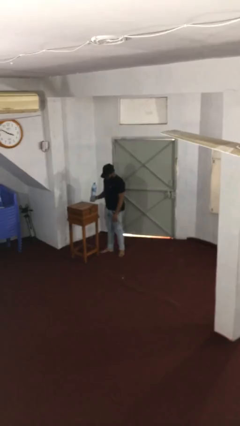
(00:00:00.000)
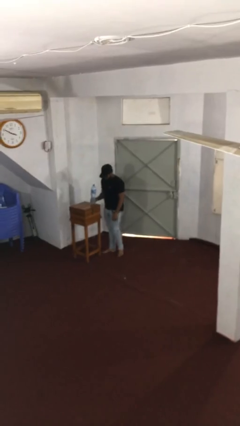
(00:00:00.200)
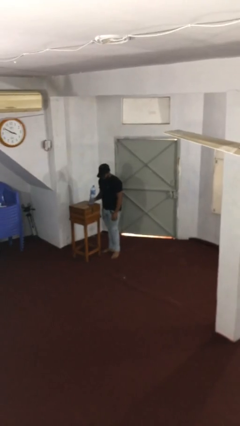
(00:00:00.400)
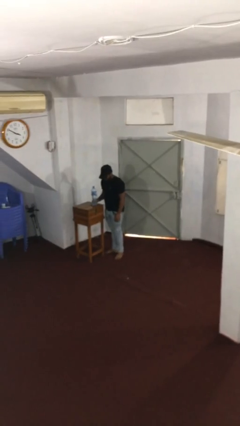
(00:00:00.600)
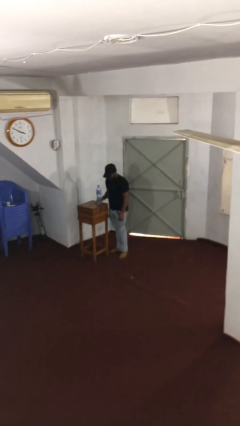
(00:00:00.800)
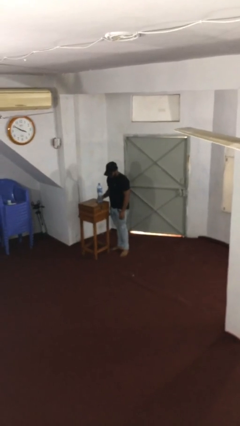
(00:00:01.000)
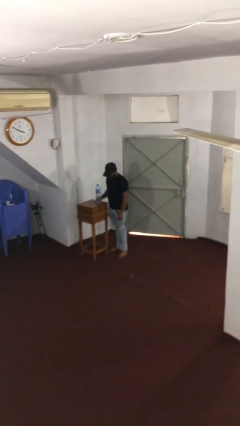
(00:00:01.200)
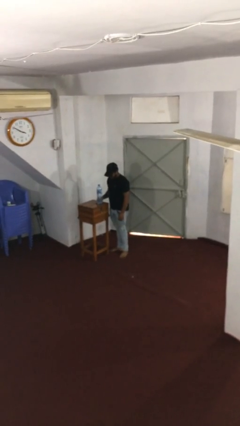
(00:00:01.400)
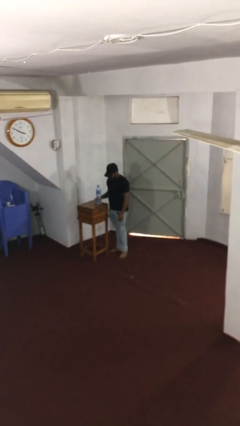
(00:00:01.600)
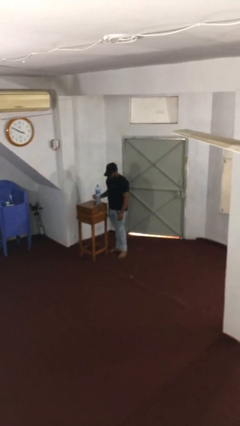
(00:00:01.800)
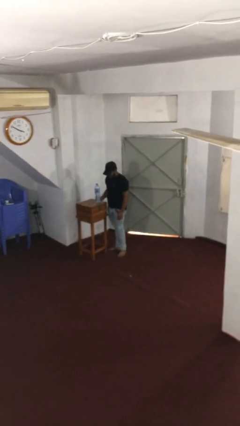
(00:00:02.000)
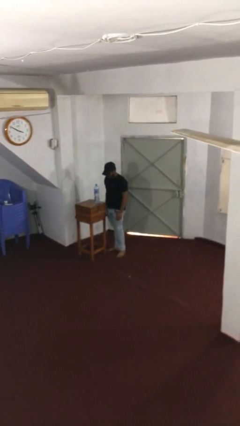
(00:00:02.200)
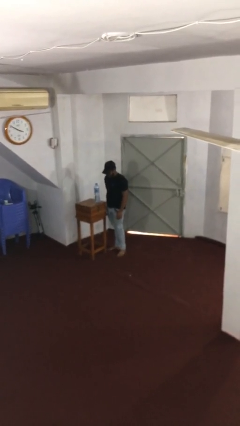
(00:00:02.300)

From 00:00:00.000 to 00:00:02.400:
person puts down object on table

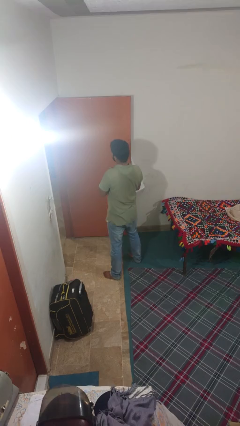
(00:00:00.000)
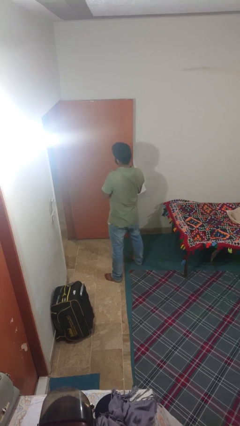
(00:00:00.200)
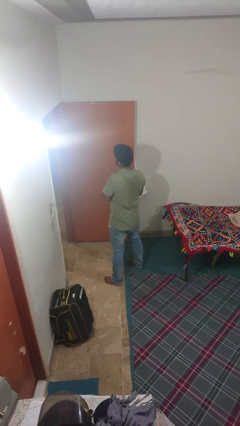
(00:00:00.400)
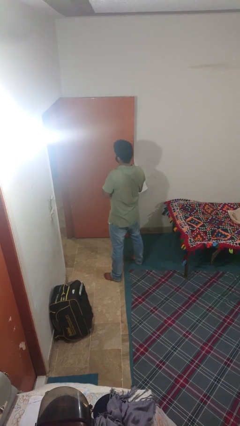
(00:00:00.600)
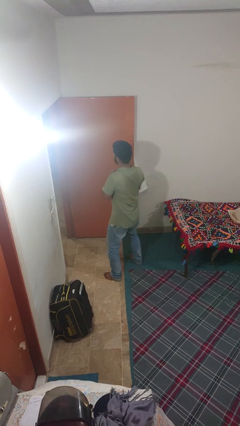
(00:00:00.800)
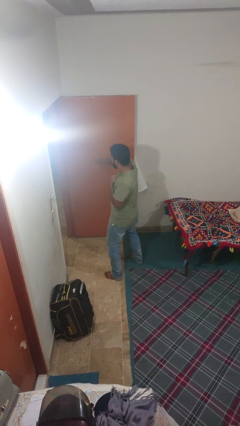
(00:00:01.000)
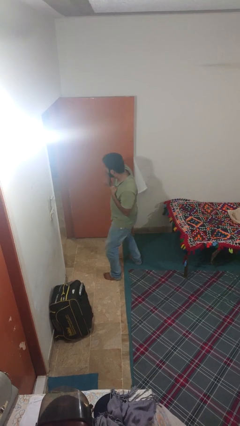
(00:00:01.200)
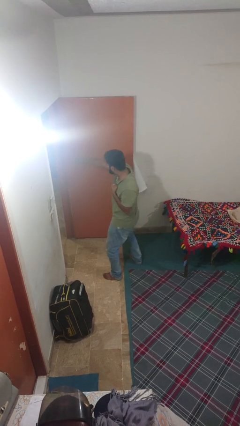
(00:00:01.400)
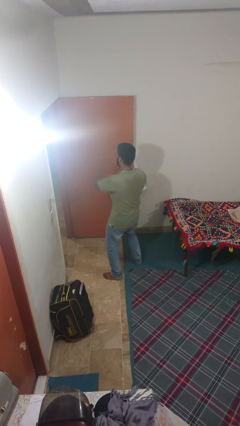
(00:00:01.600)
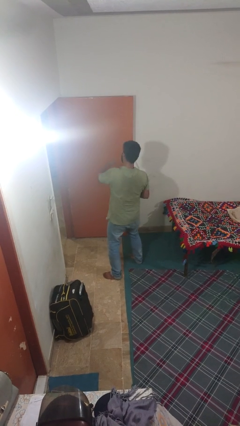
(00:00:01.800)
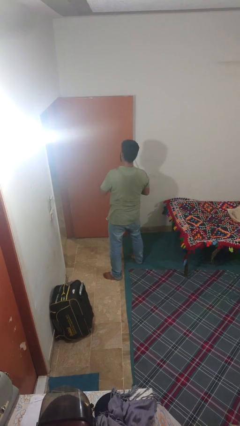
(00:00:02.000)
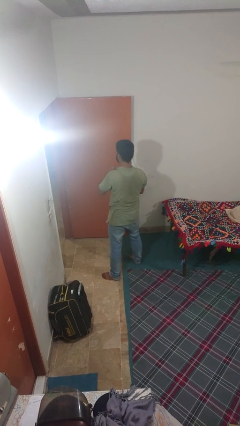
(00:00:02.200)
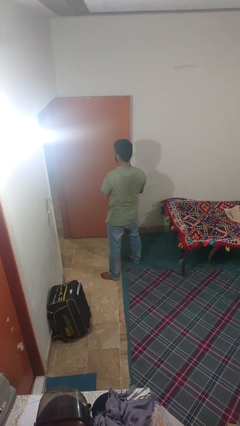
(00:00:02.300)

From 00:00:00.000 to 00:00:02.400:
person punches

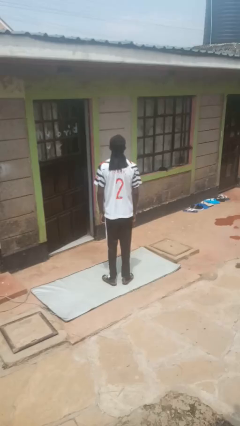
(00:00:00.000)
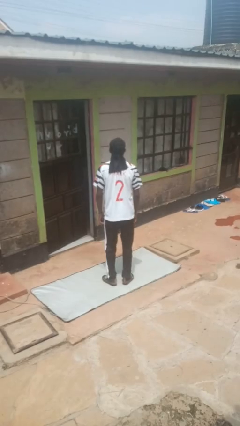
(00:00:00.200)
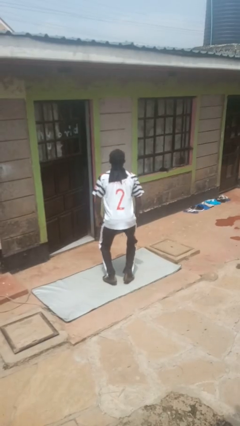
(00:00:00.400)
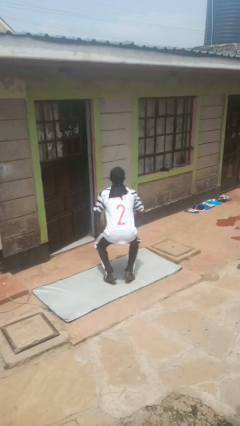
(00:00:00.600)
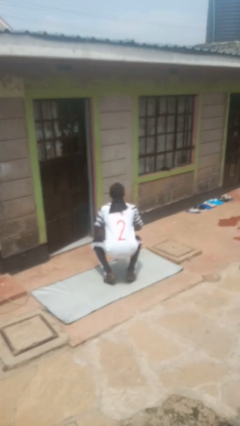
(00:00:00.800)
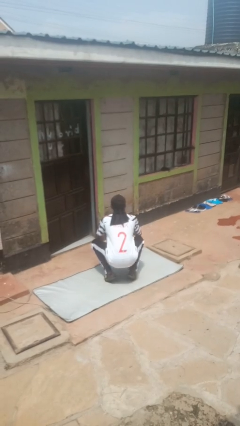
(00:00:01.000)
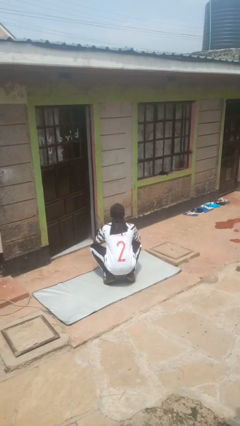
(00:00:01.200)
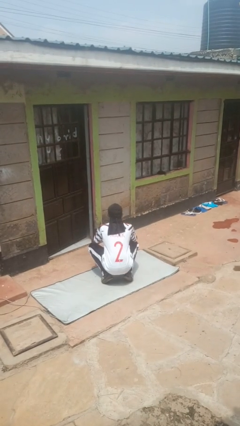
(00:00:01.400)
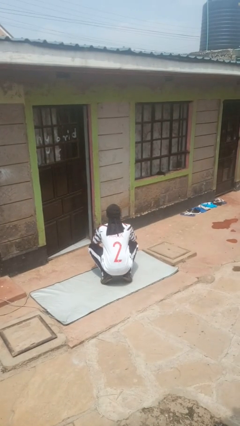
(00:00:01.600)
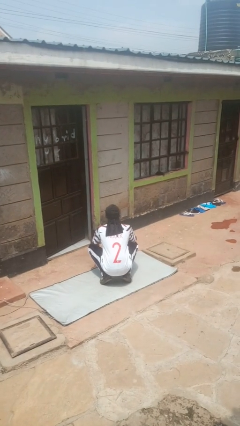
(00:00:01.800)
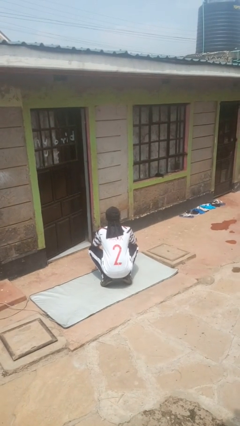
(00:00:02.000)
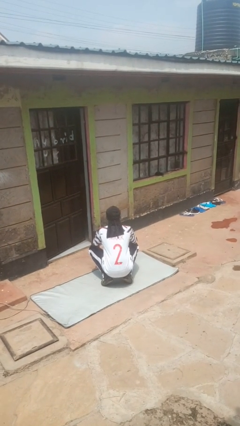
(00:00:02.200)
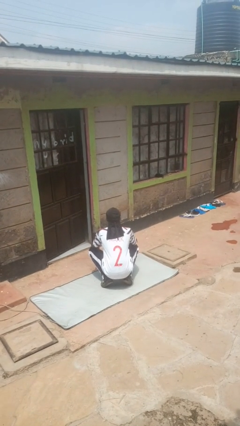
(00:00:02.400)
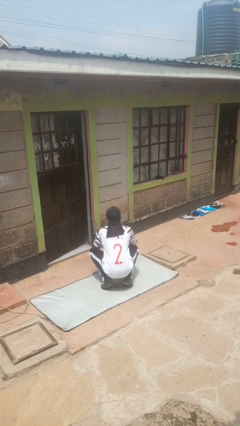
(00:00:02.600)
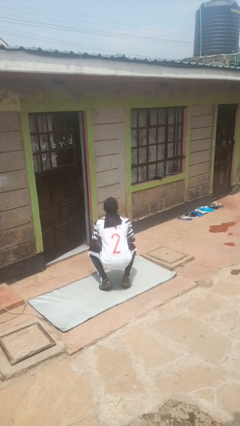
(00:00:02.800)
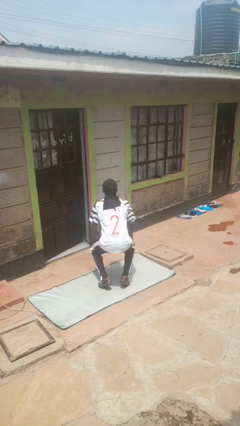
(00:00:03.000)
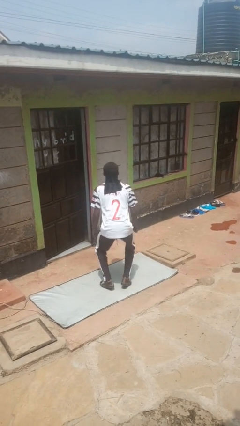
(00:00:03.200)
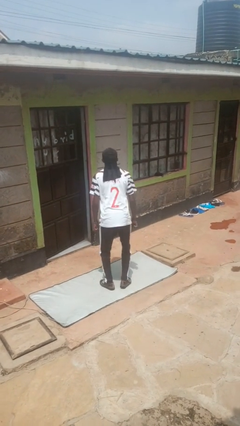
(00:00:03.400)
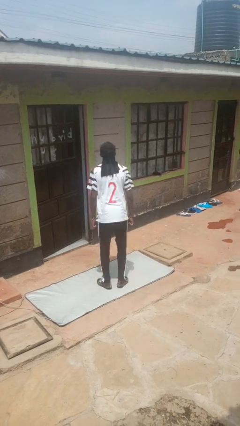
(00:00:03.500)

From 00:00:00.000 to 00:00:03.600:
person squats

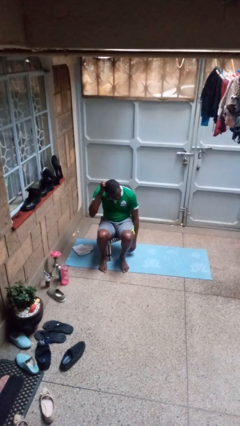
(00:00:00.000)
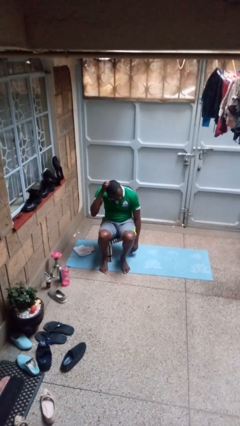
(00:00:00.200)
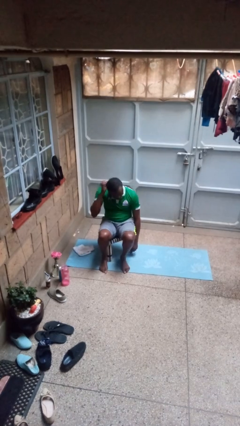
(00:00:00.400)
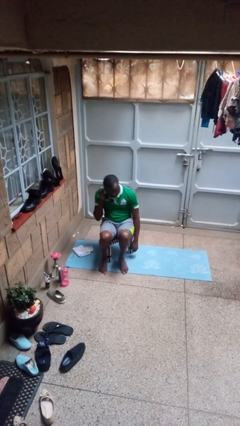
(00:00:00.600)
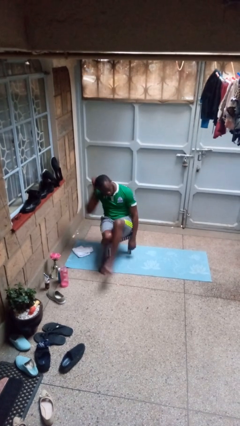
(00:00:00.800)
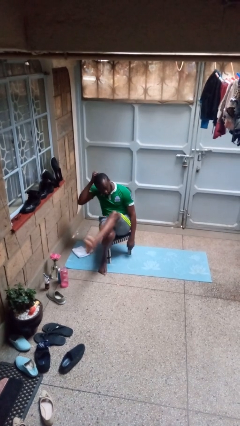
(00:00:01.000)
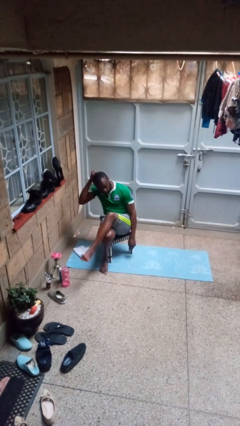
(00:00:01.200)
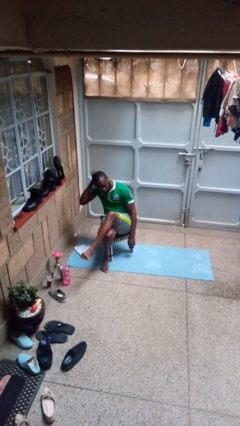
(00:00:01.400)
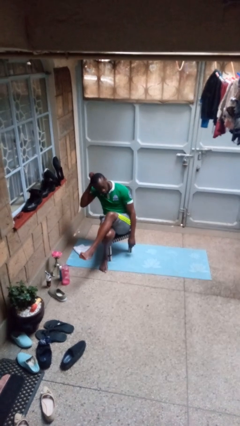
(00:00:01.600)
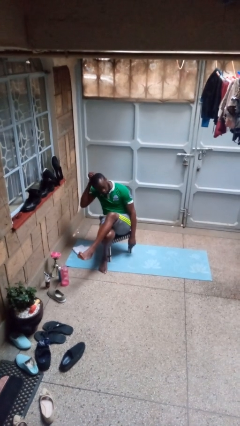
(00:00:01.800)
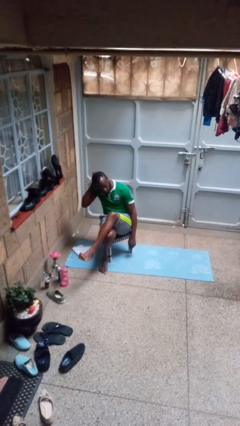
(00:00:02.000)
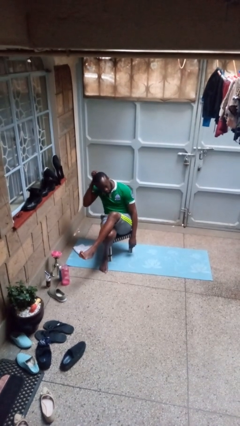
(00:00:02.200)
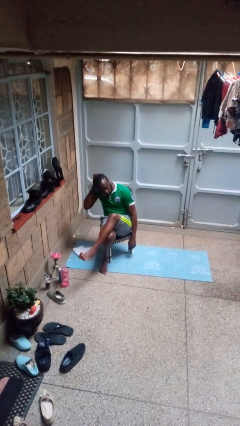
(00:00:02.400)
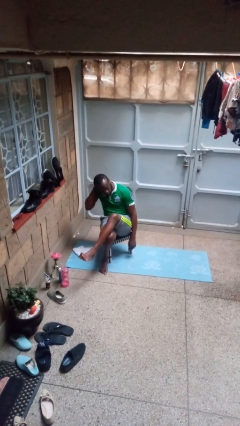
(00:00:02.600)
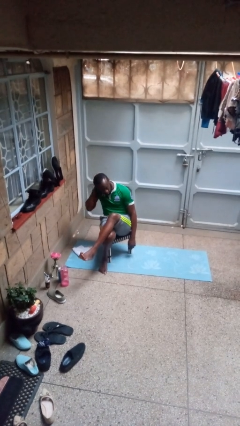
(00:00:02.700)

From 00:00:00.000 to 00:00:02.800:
person crosses legs

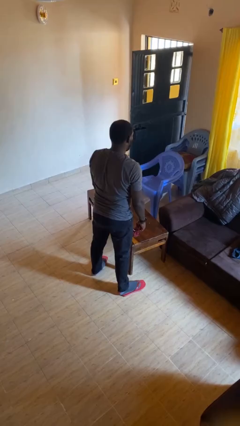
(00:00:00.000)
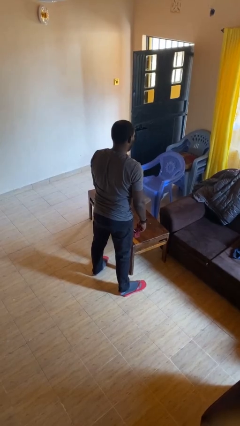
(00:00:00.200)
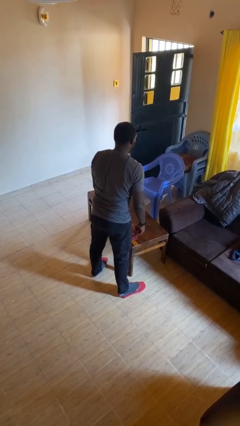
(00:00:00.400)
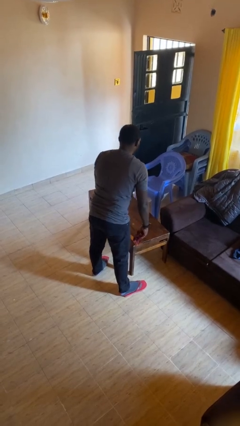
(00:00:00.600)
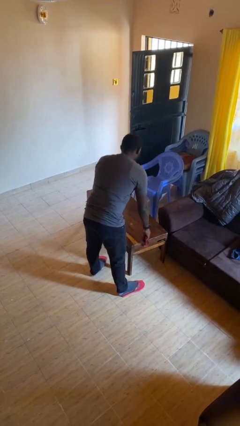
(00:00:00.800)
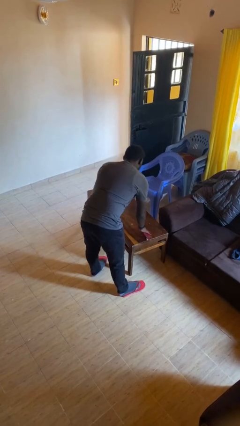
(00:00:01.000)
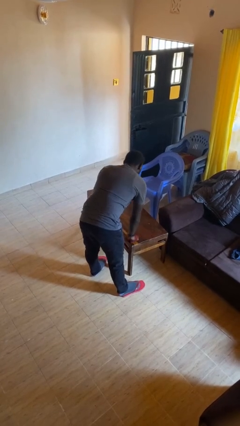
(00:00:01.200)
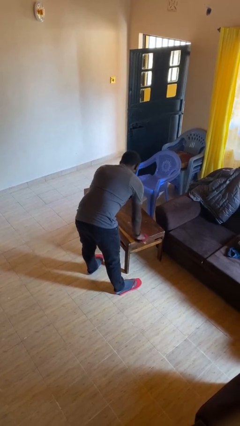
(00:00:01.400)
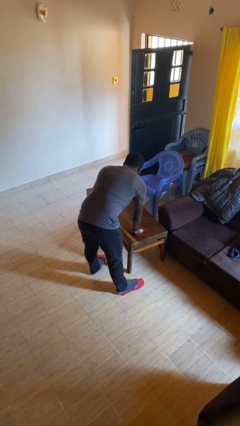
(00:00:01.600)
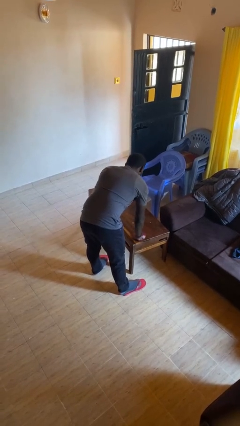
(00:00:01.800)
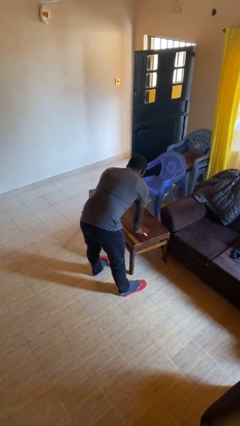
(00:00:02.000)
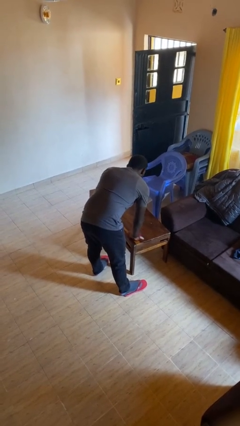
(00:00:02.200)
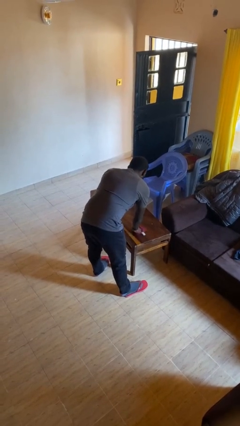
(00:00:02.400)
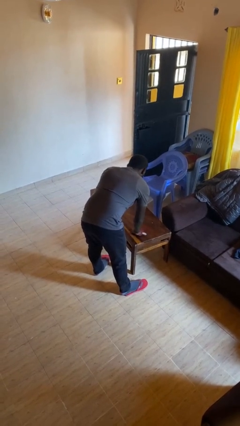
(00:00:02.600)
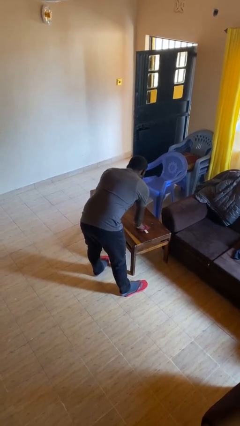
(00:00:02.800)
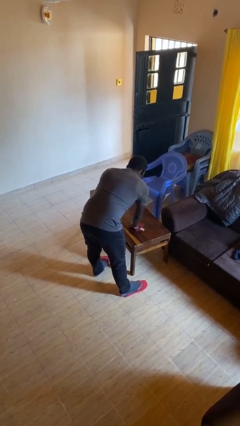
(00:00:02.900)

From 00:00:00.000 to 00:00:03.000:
person cleans table with rag

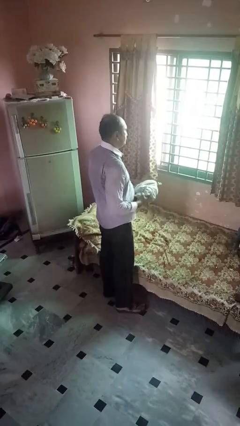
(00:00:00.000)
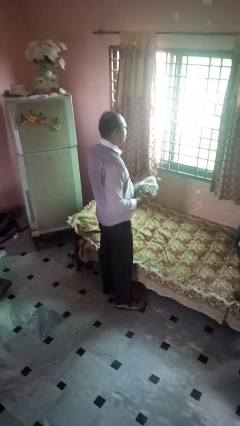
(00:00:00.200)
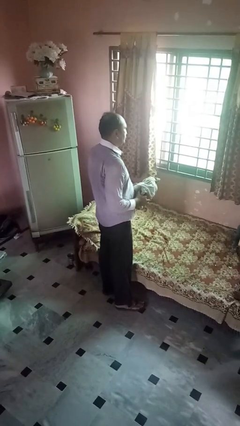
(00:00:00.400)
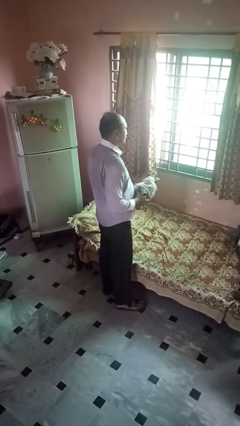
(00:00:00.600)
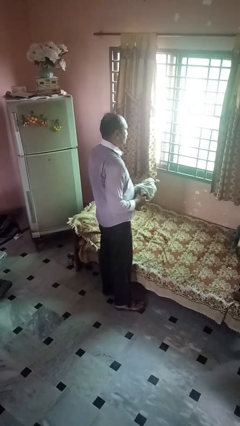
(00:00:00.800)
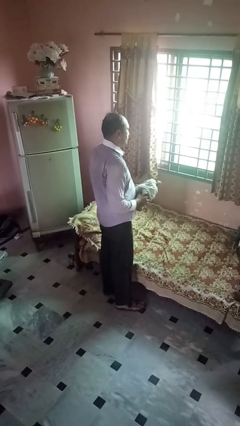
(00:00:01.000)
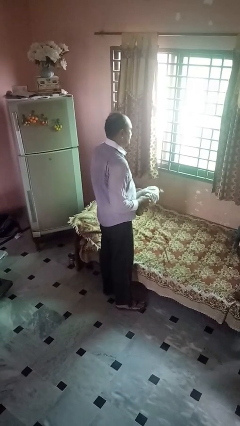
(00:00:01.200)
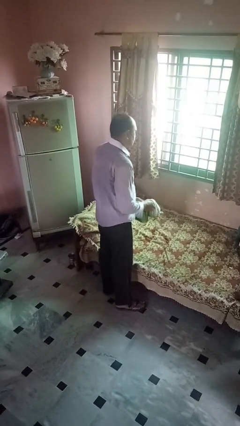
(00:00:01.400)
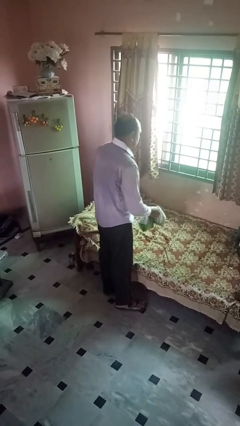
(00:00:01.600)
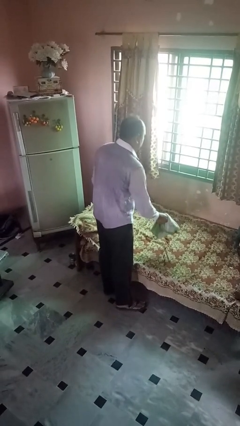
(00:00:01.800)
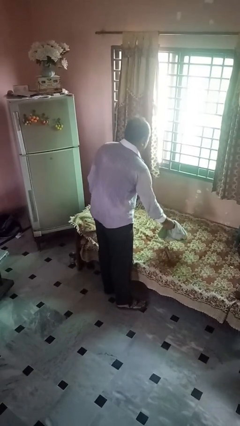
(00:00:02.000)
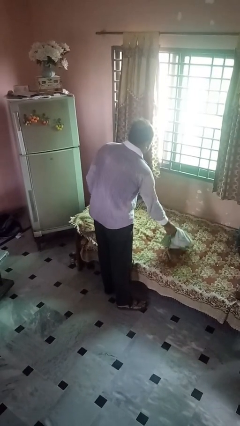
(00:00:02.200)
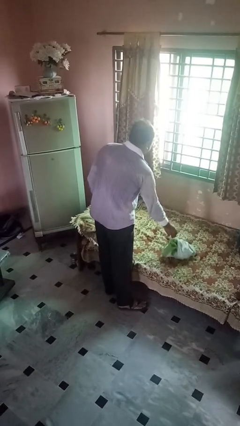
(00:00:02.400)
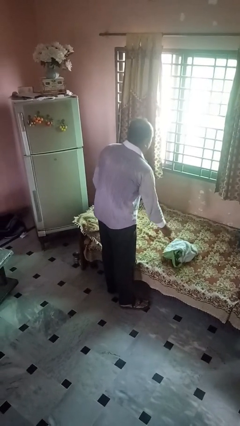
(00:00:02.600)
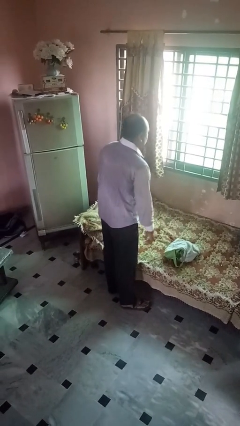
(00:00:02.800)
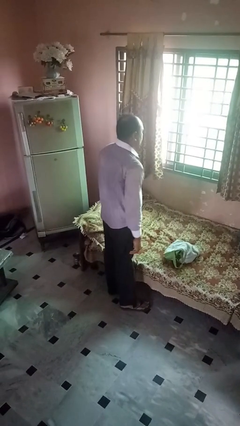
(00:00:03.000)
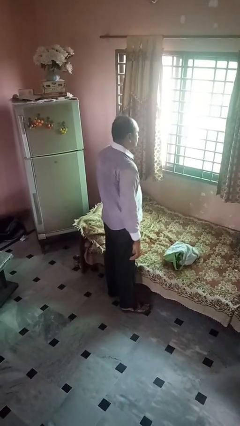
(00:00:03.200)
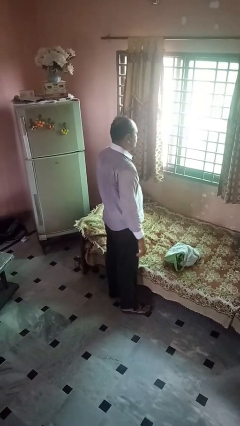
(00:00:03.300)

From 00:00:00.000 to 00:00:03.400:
person puts down object on bed
